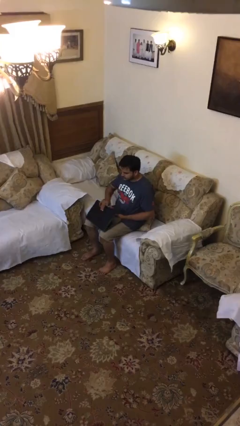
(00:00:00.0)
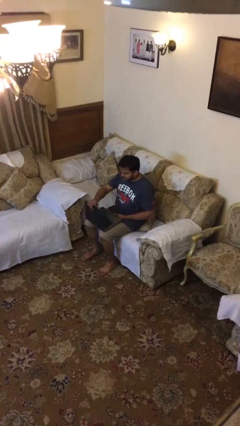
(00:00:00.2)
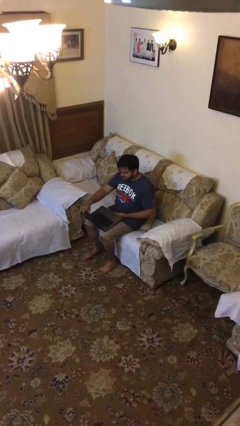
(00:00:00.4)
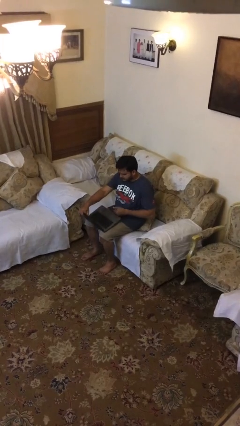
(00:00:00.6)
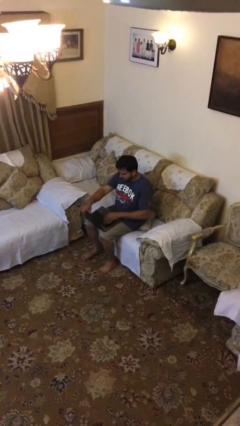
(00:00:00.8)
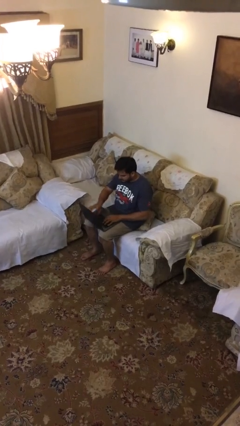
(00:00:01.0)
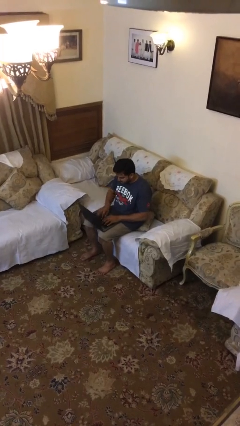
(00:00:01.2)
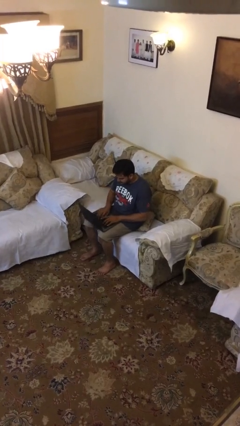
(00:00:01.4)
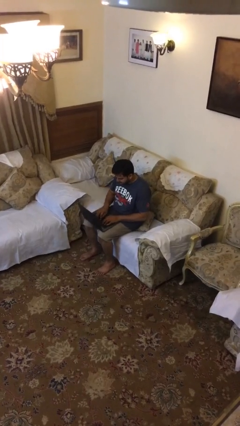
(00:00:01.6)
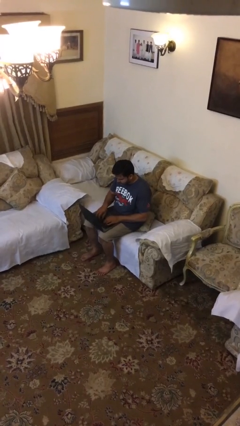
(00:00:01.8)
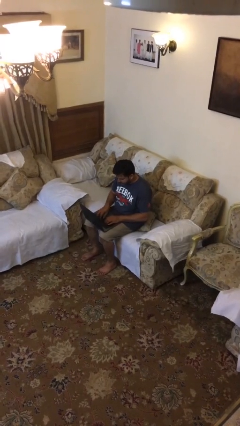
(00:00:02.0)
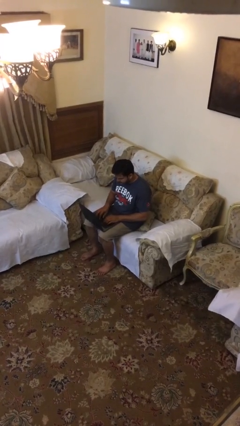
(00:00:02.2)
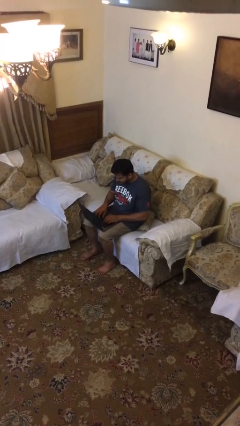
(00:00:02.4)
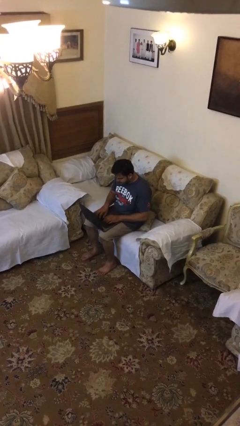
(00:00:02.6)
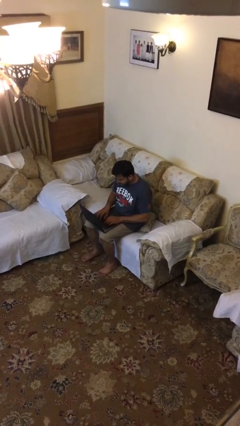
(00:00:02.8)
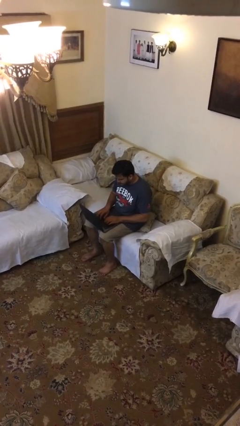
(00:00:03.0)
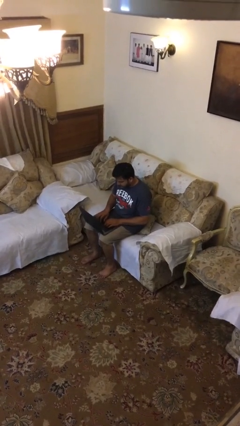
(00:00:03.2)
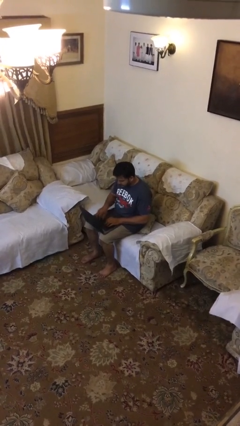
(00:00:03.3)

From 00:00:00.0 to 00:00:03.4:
person interacts with laptop

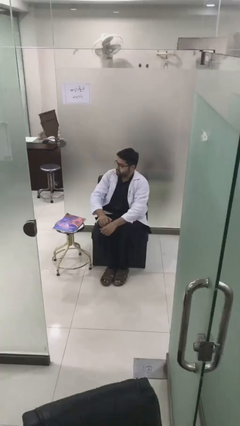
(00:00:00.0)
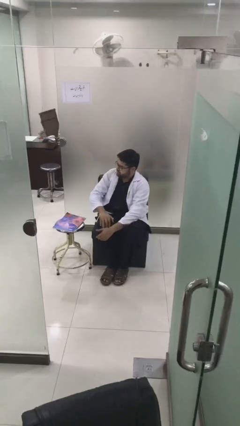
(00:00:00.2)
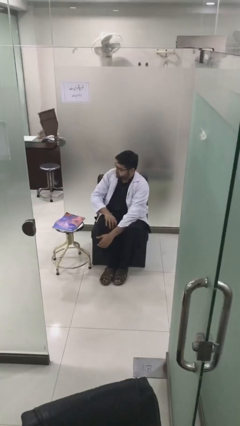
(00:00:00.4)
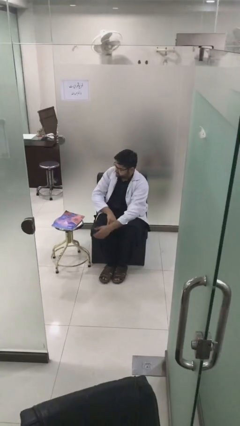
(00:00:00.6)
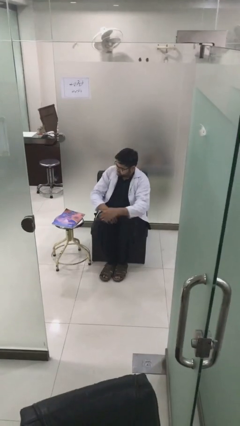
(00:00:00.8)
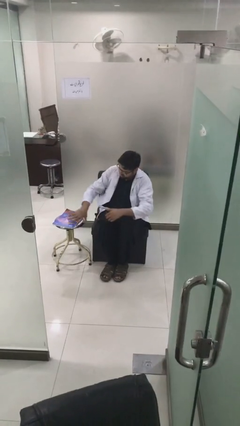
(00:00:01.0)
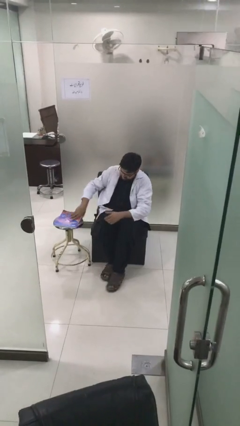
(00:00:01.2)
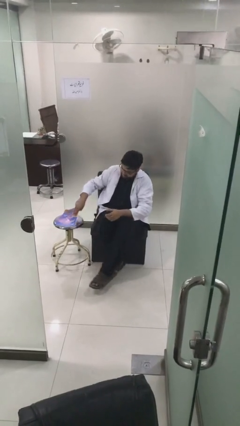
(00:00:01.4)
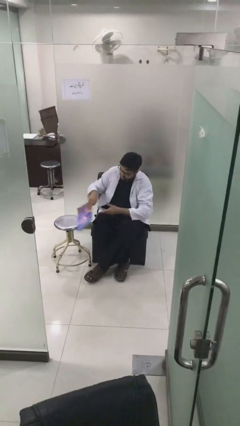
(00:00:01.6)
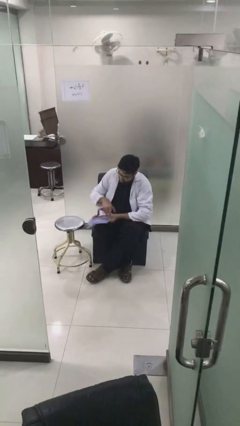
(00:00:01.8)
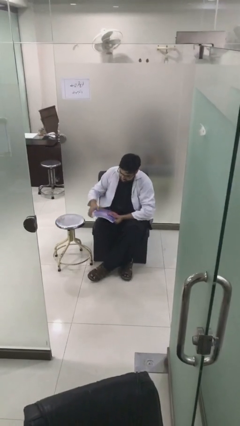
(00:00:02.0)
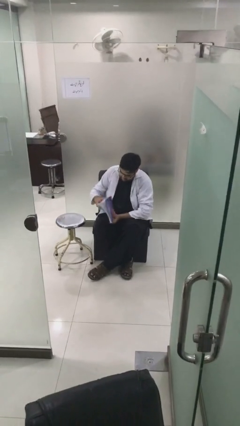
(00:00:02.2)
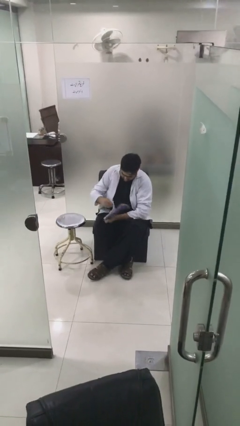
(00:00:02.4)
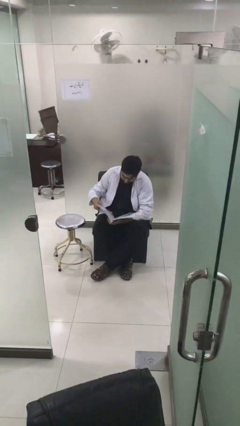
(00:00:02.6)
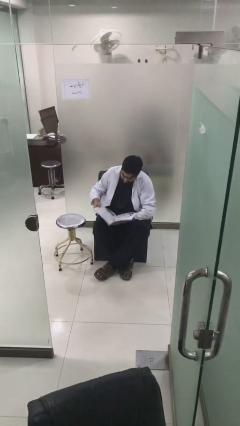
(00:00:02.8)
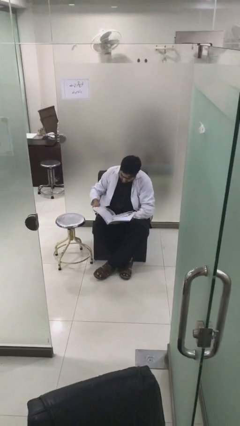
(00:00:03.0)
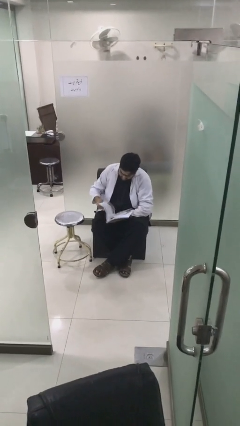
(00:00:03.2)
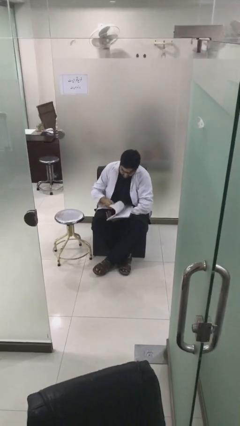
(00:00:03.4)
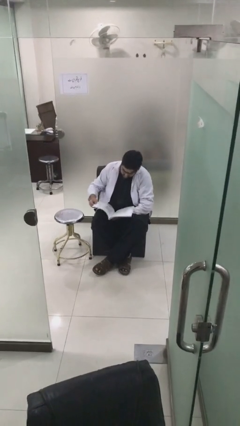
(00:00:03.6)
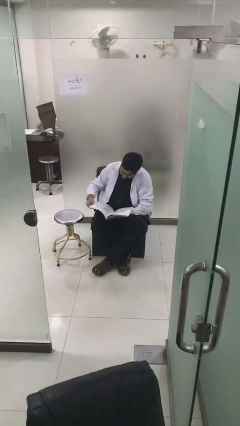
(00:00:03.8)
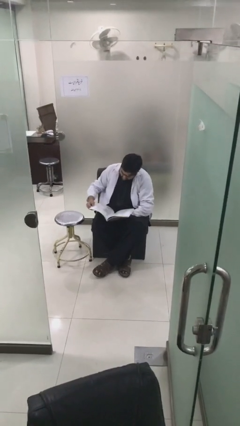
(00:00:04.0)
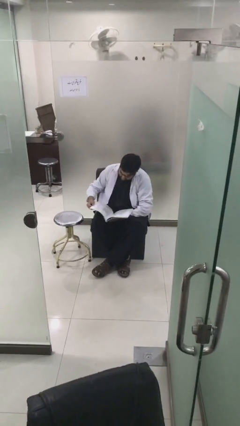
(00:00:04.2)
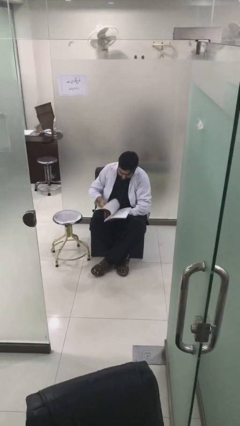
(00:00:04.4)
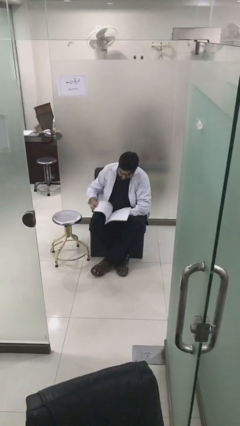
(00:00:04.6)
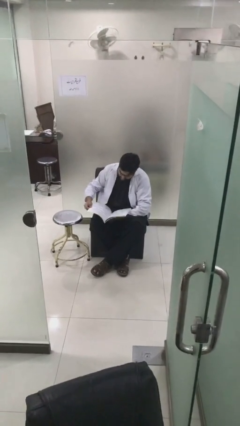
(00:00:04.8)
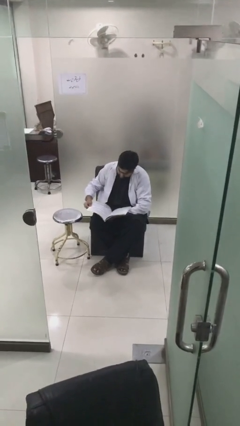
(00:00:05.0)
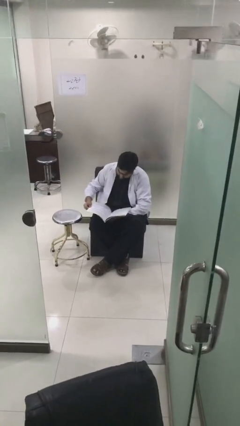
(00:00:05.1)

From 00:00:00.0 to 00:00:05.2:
person reads document

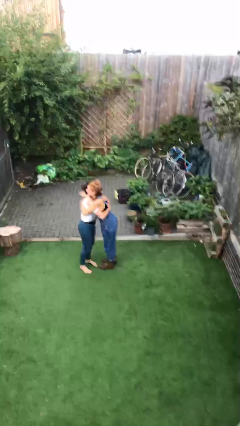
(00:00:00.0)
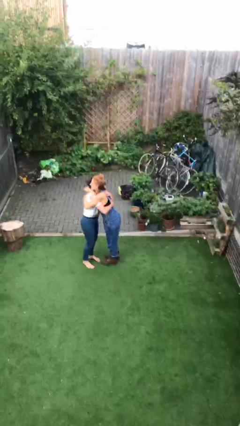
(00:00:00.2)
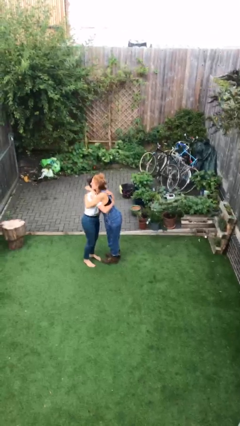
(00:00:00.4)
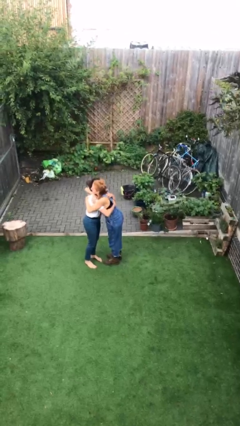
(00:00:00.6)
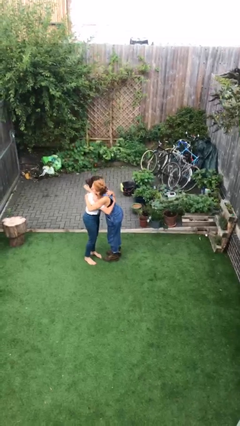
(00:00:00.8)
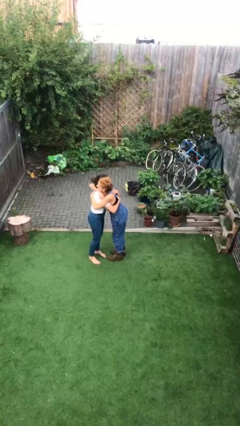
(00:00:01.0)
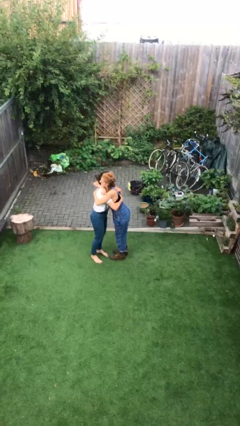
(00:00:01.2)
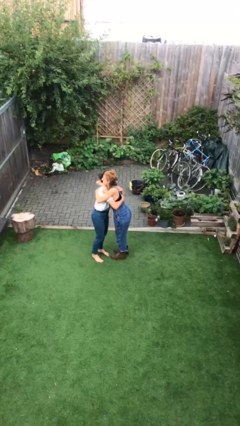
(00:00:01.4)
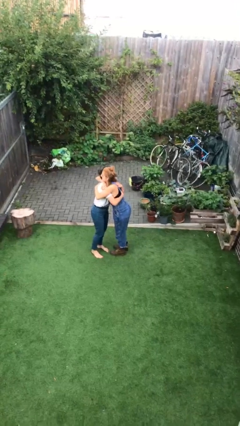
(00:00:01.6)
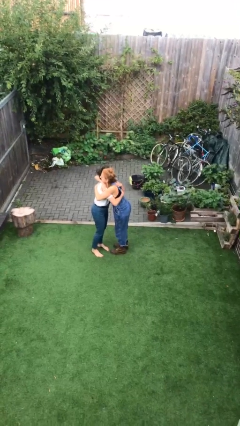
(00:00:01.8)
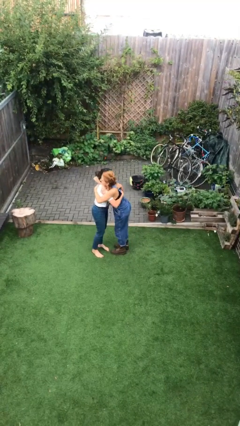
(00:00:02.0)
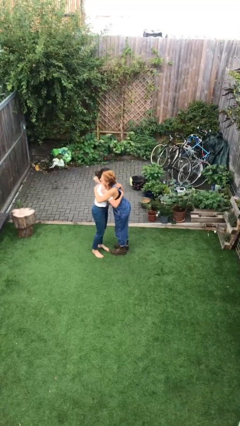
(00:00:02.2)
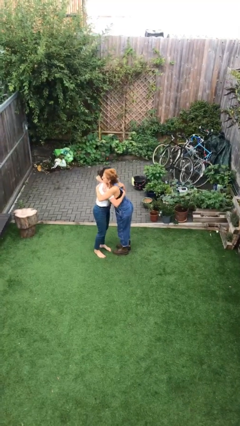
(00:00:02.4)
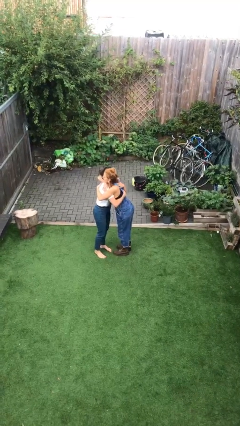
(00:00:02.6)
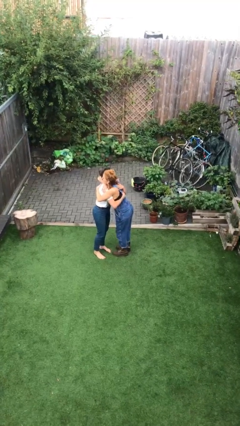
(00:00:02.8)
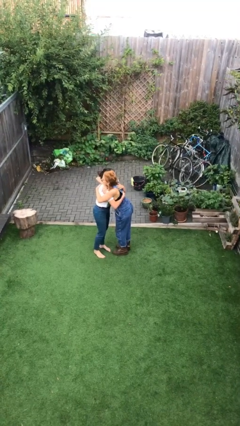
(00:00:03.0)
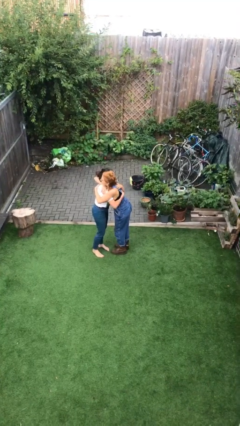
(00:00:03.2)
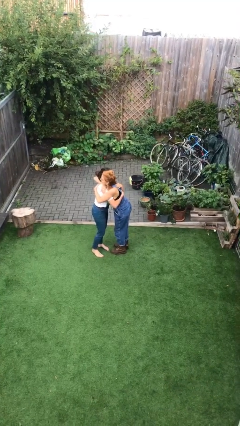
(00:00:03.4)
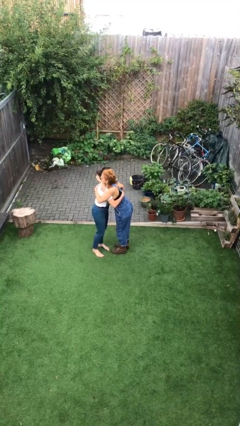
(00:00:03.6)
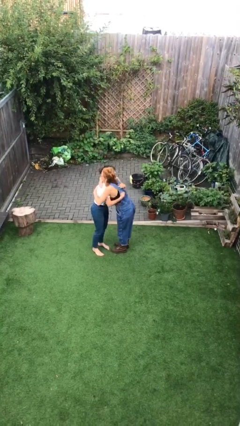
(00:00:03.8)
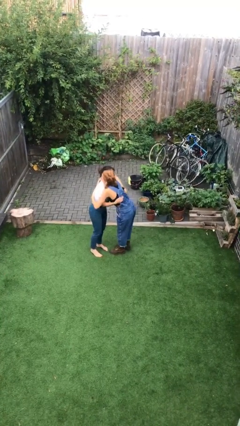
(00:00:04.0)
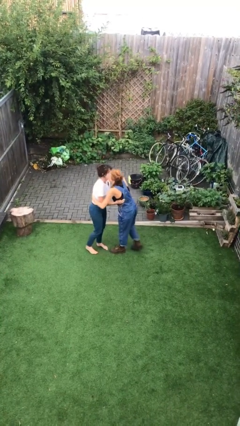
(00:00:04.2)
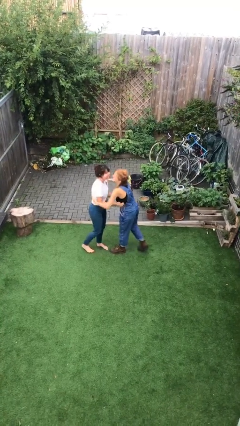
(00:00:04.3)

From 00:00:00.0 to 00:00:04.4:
person embraces person

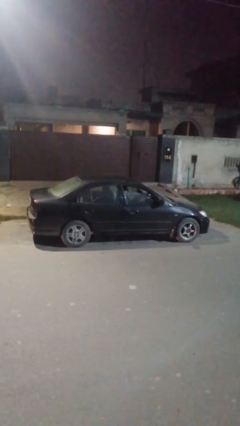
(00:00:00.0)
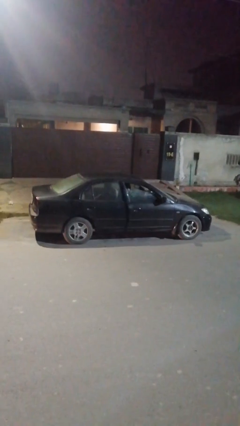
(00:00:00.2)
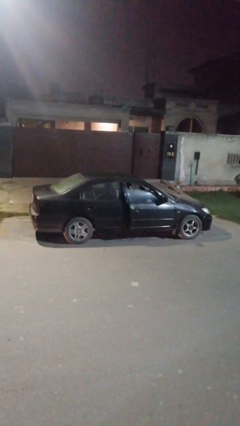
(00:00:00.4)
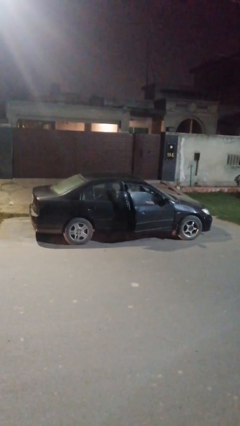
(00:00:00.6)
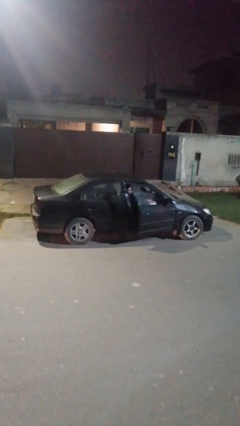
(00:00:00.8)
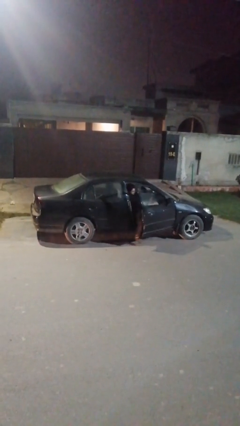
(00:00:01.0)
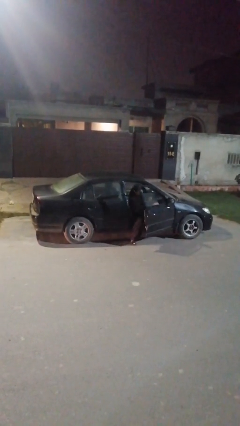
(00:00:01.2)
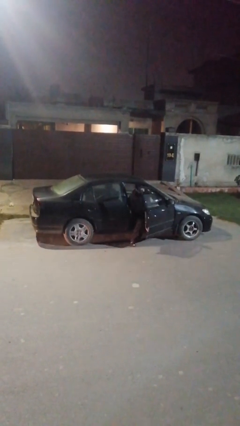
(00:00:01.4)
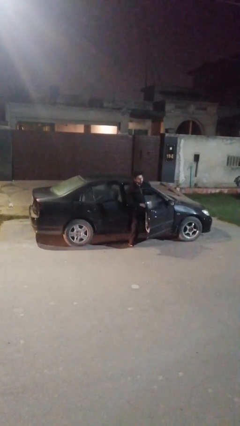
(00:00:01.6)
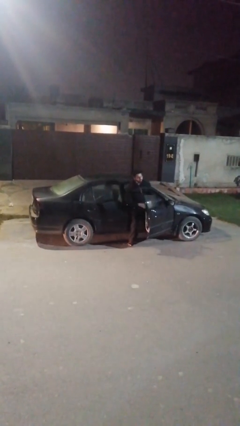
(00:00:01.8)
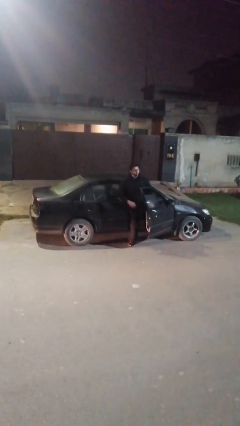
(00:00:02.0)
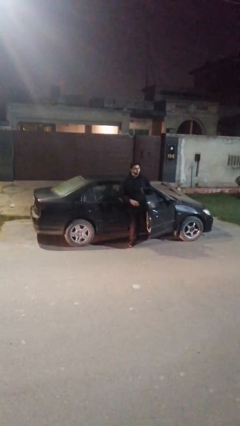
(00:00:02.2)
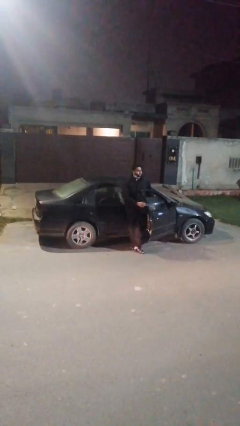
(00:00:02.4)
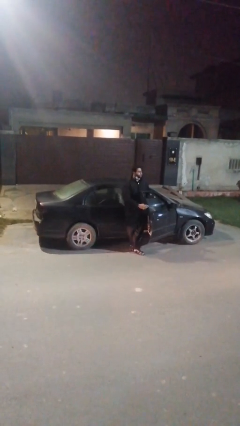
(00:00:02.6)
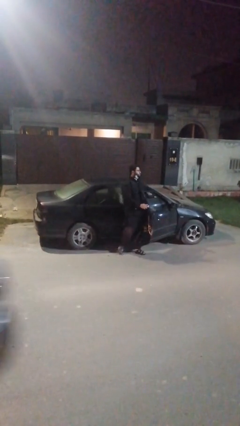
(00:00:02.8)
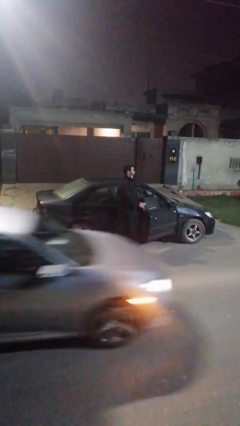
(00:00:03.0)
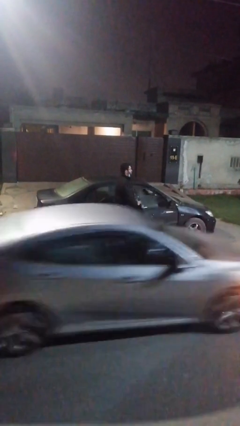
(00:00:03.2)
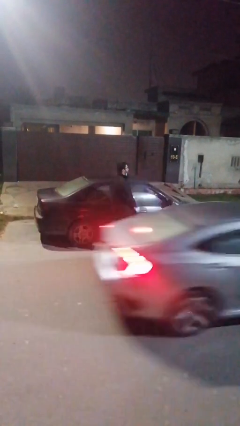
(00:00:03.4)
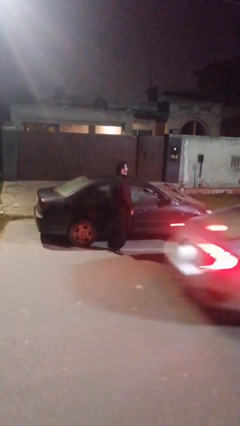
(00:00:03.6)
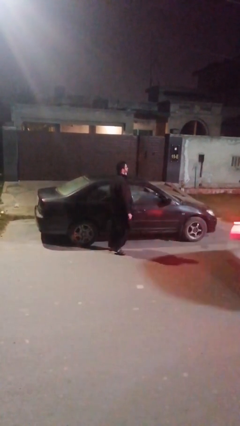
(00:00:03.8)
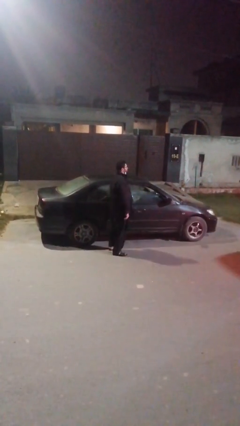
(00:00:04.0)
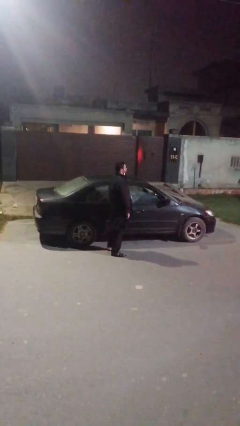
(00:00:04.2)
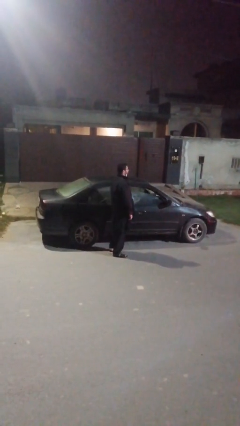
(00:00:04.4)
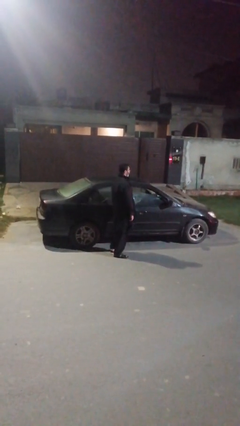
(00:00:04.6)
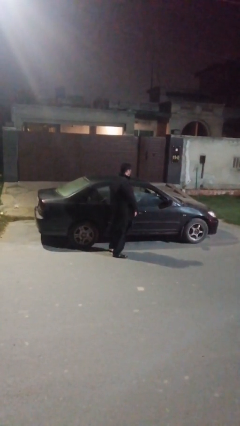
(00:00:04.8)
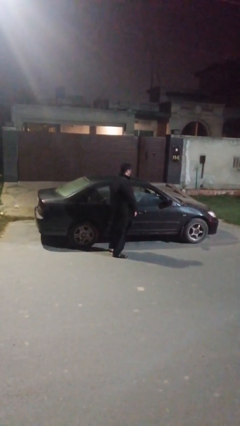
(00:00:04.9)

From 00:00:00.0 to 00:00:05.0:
car drops off person
